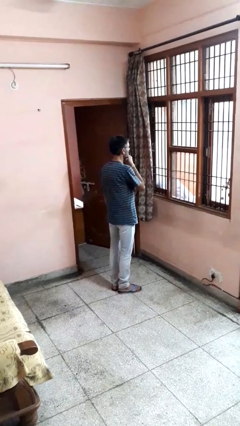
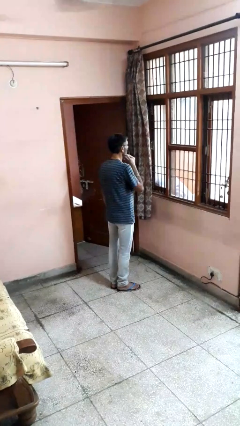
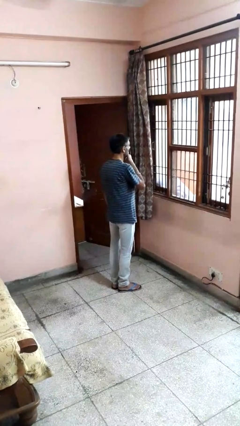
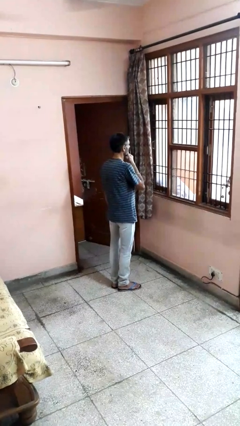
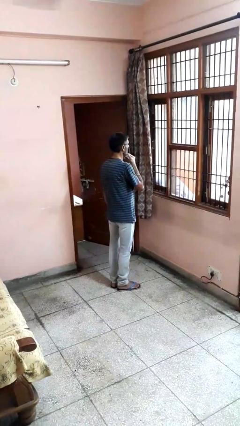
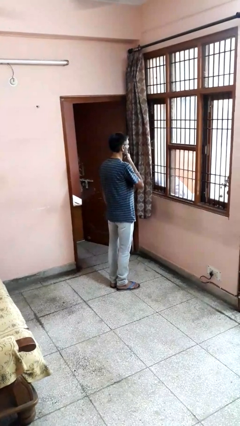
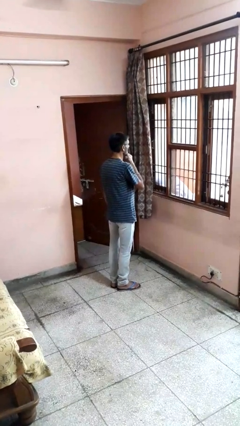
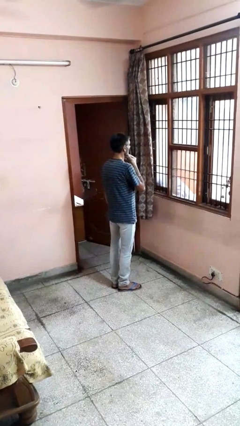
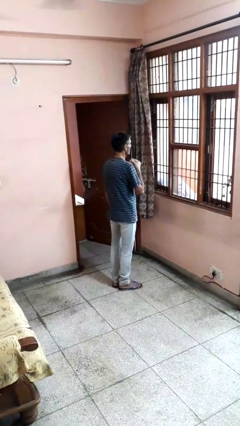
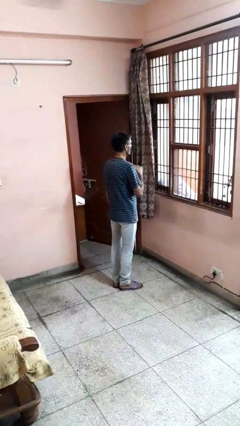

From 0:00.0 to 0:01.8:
person strokes chin

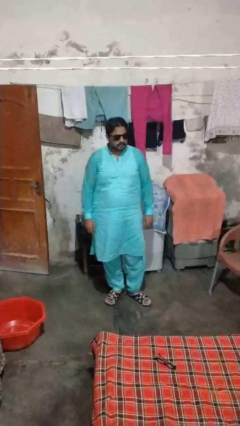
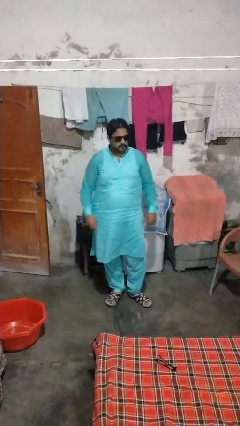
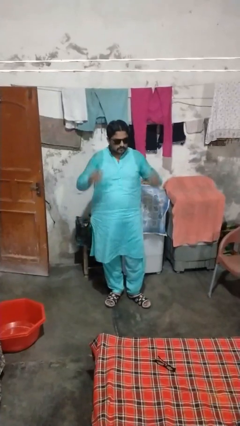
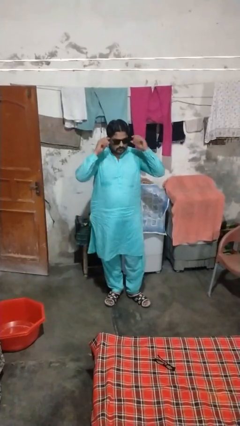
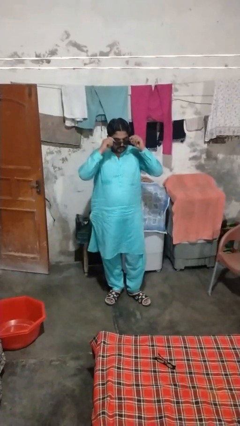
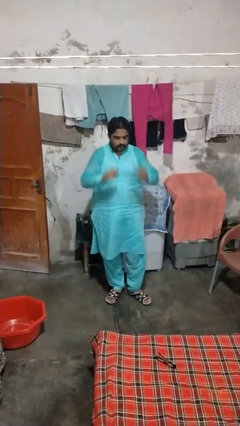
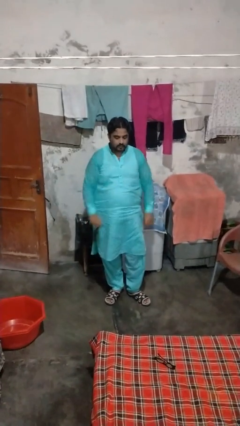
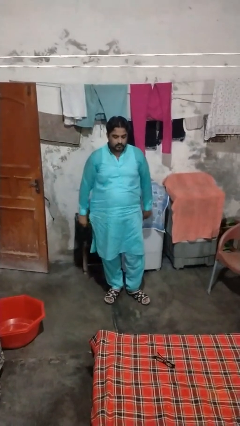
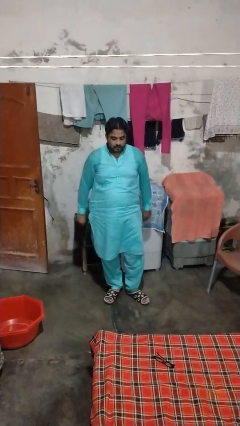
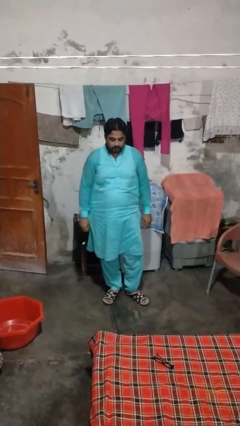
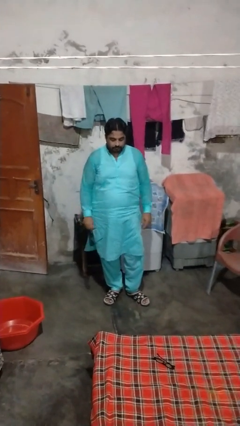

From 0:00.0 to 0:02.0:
person takes off sunglasses

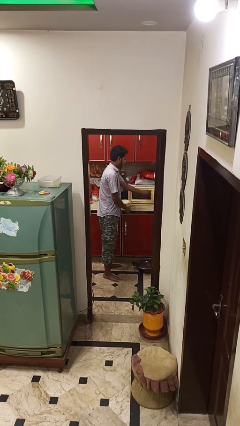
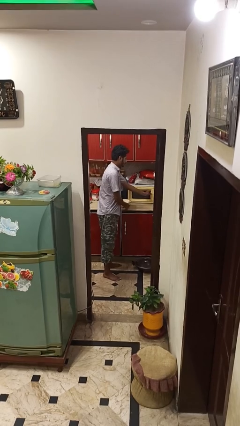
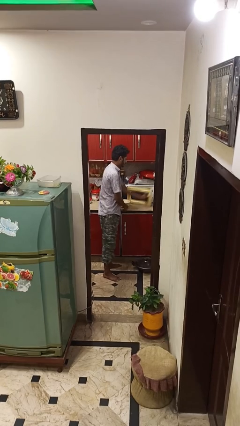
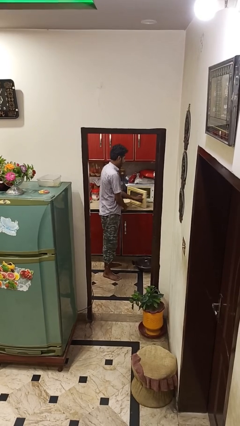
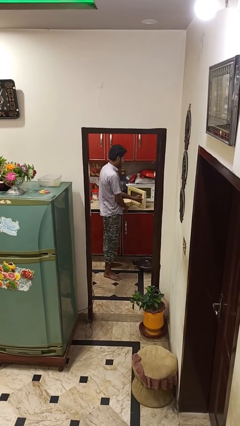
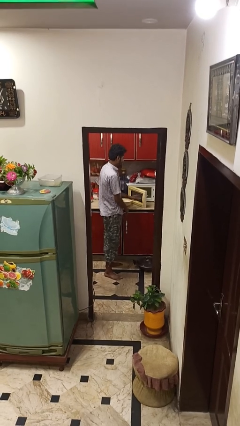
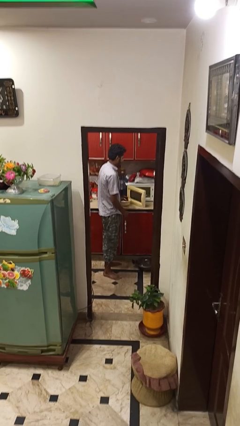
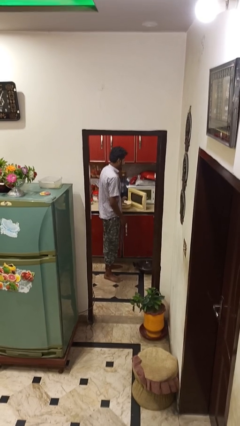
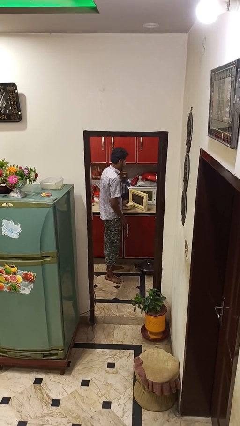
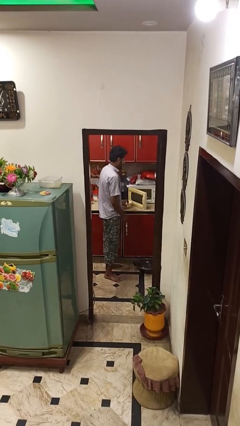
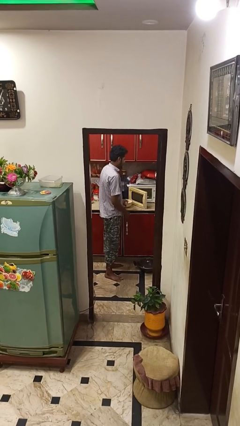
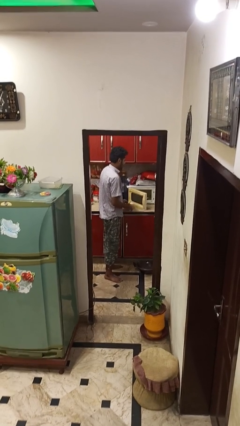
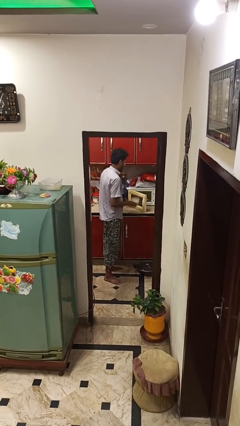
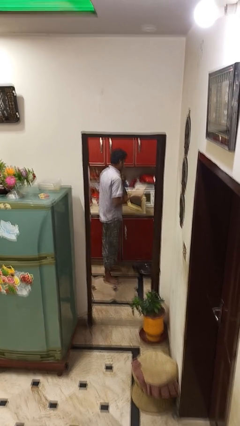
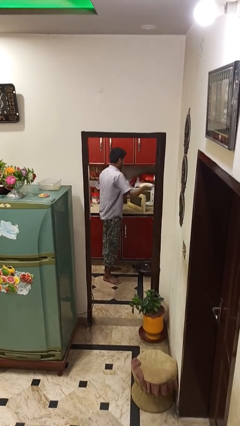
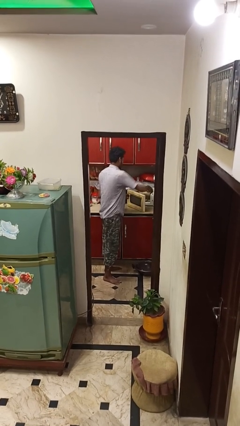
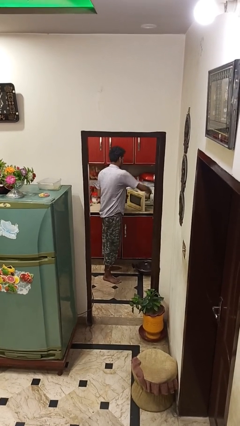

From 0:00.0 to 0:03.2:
person opens microwave

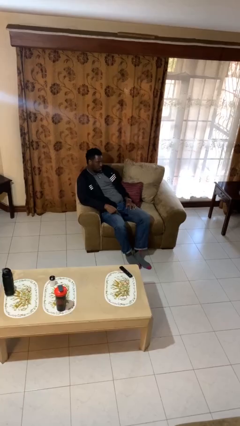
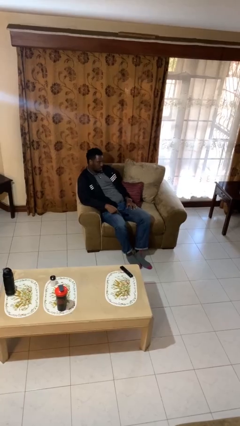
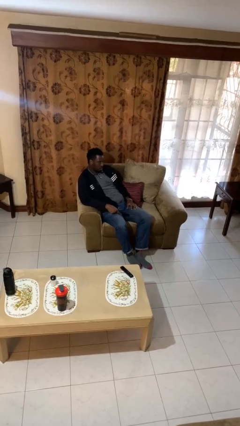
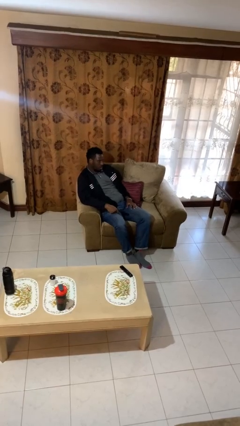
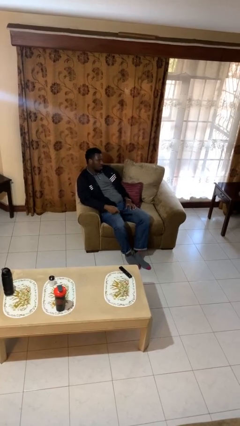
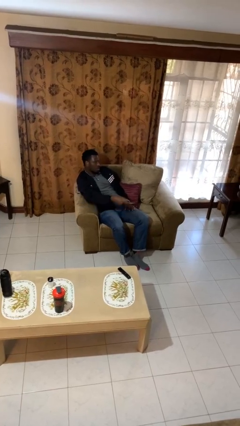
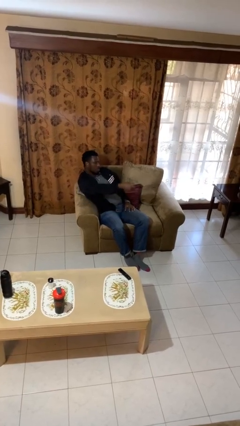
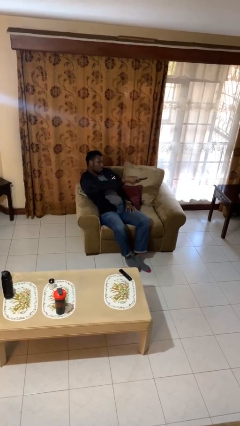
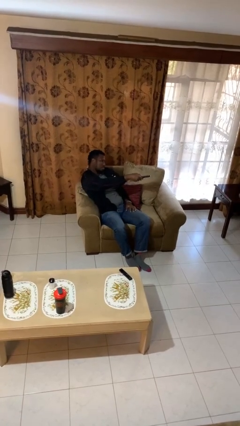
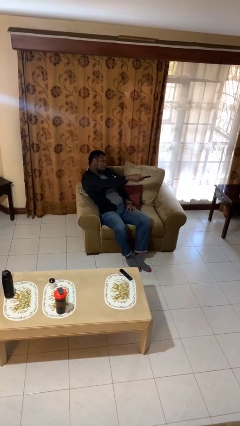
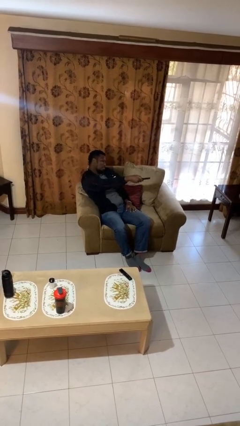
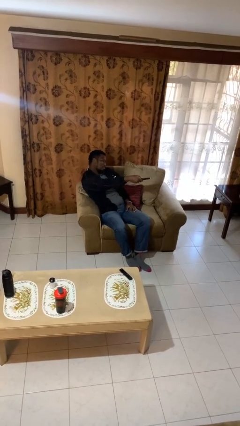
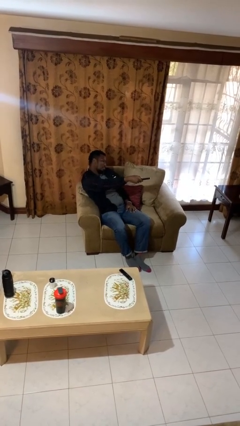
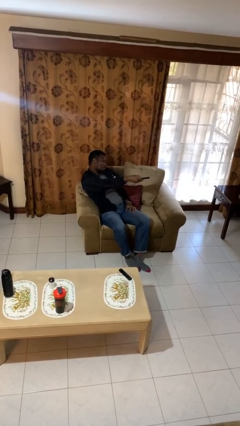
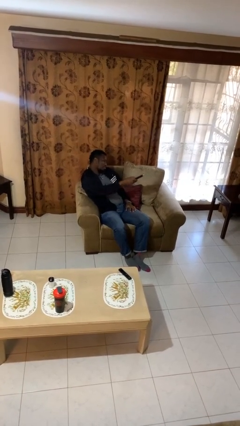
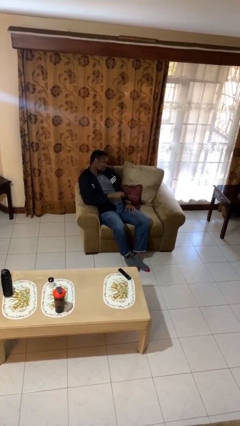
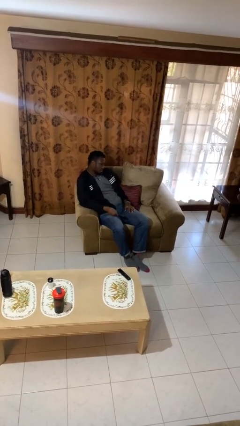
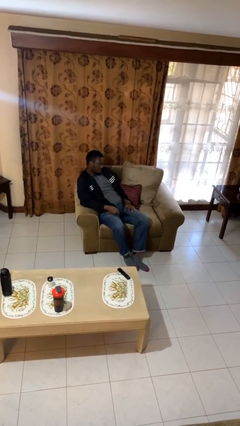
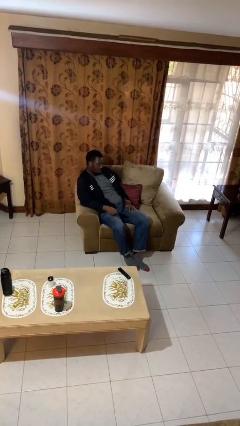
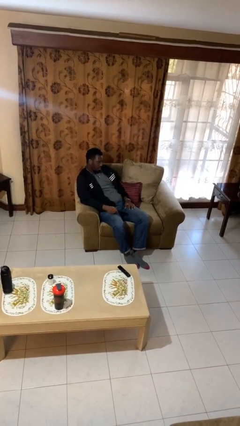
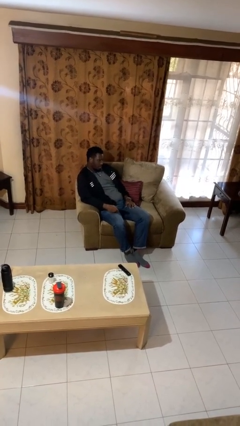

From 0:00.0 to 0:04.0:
person uses television remote

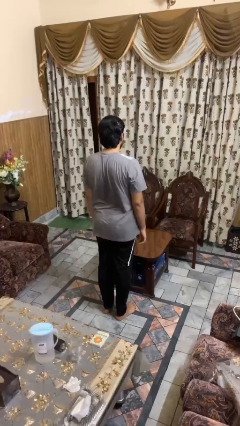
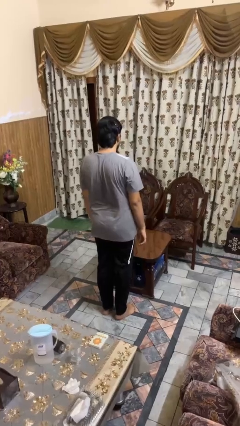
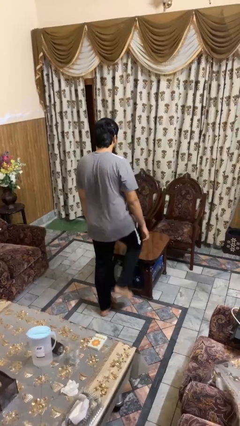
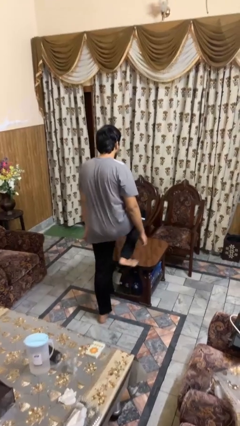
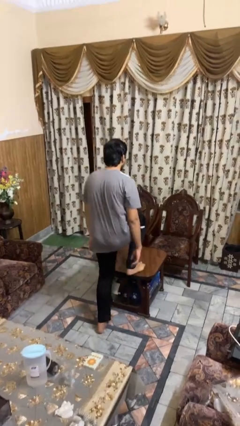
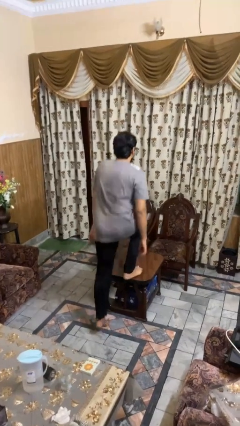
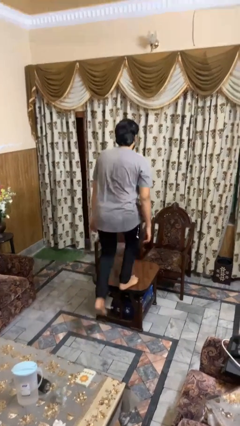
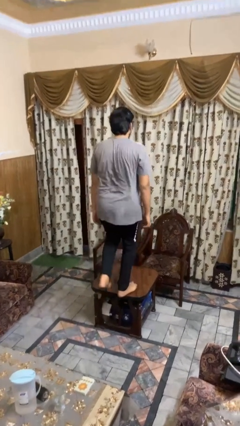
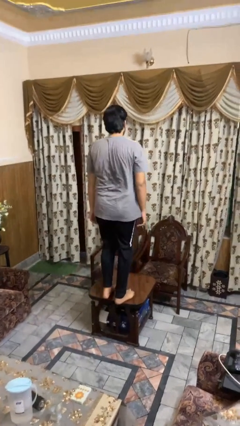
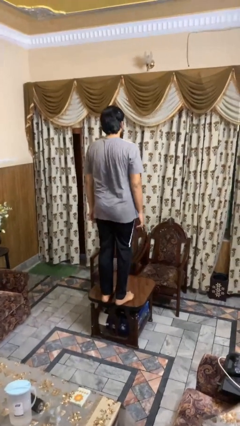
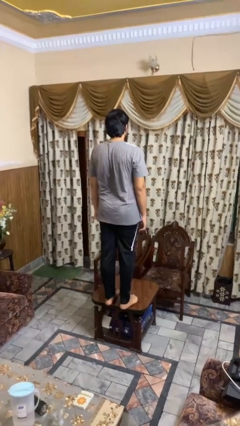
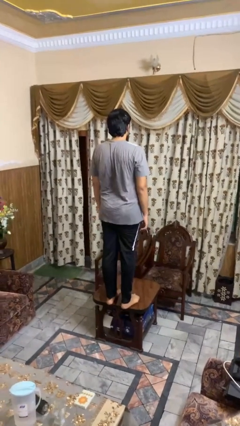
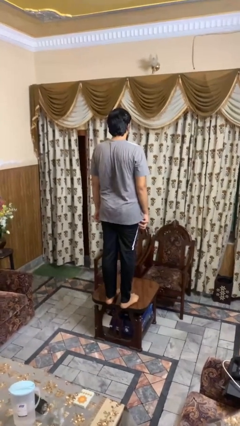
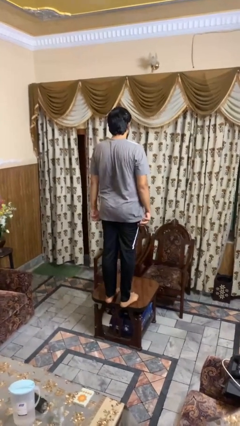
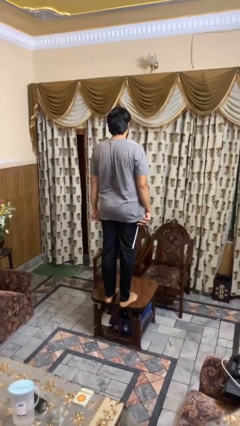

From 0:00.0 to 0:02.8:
person climbs on table

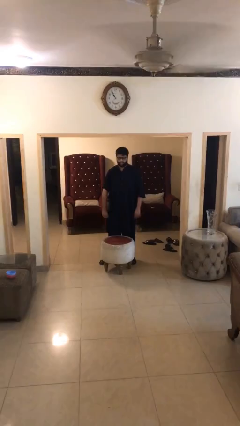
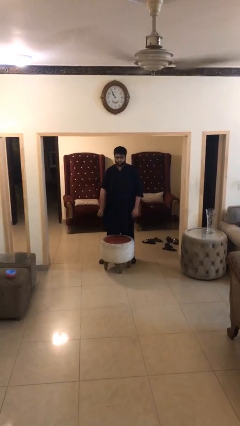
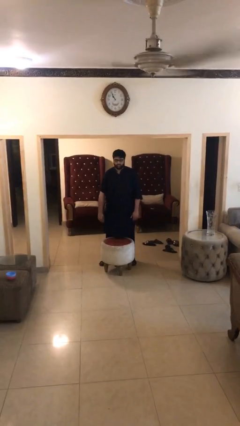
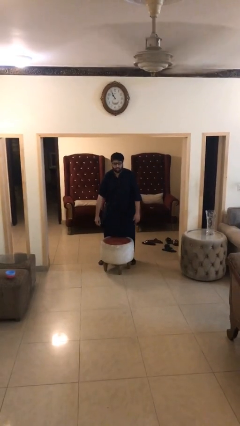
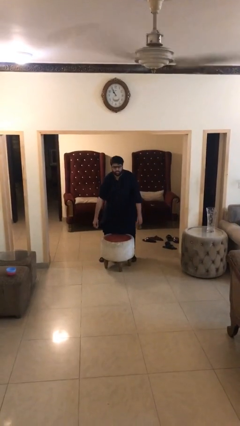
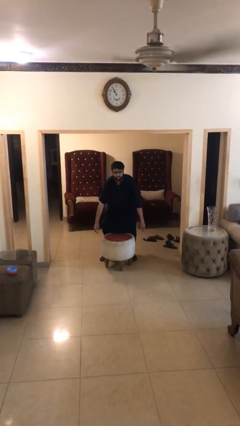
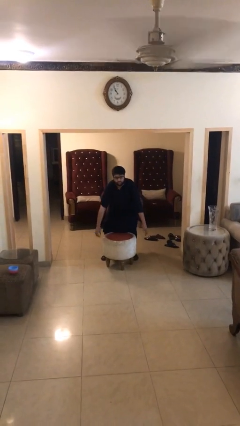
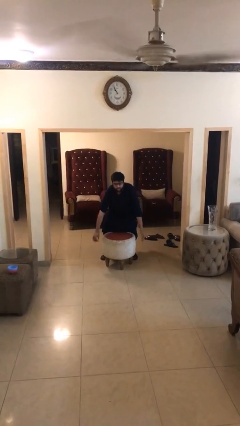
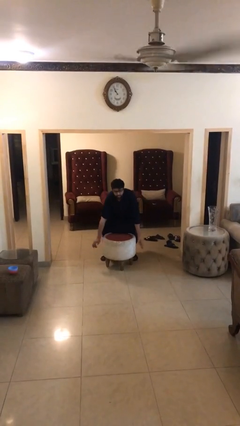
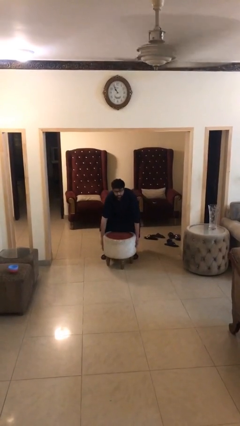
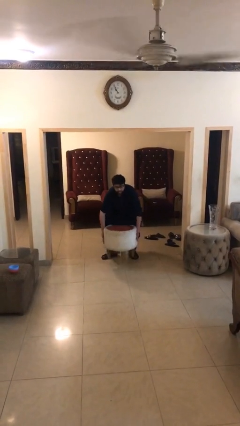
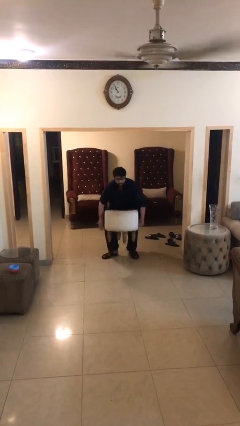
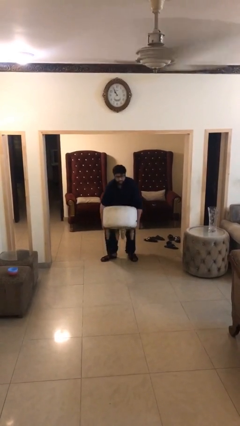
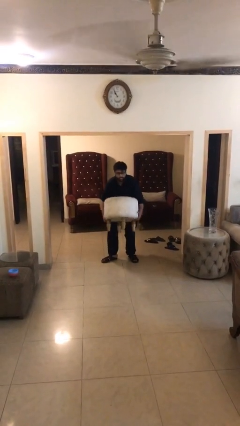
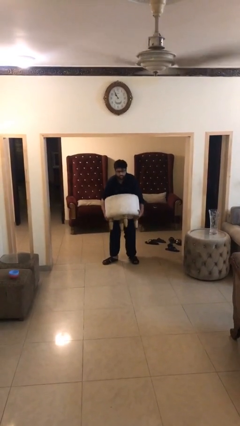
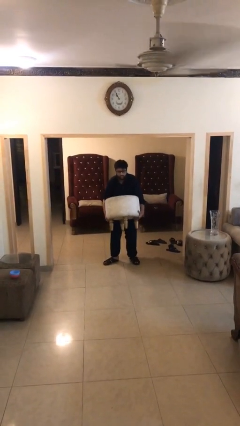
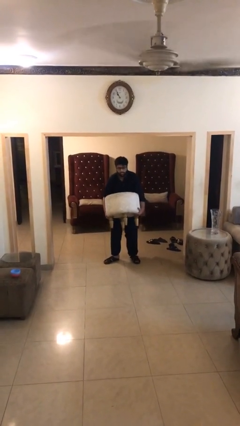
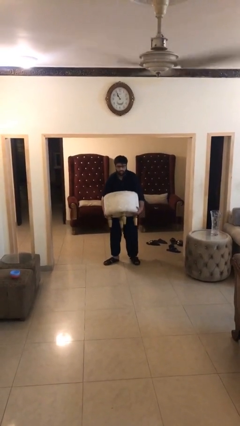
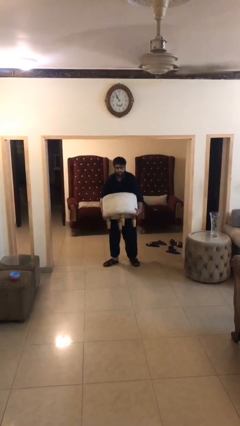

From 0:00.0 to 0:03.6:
person picks up object from floor
